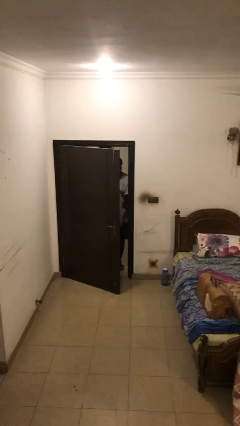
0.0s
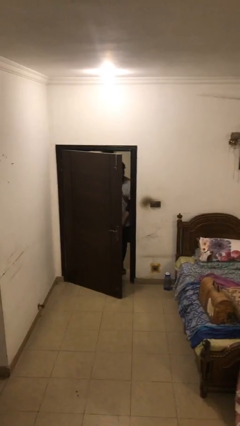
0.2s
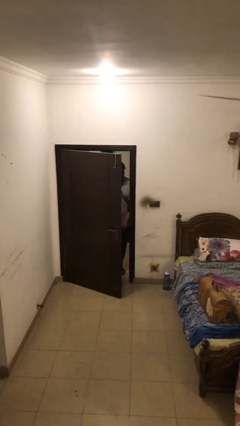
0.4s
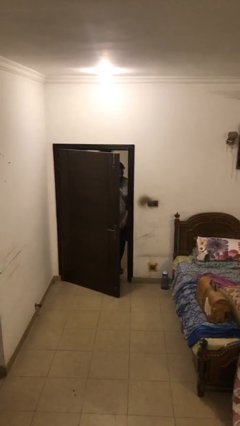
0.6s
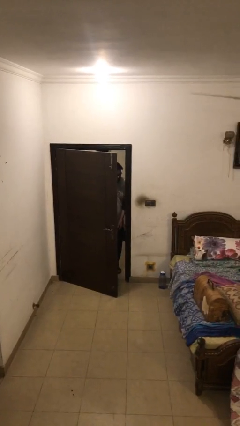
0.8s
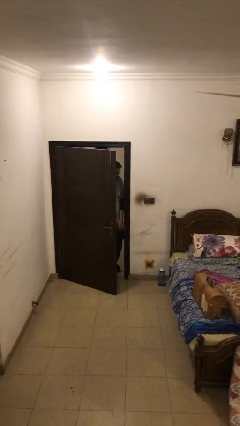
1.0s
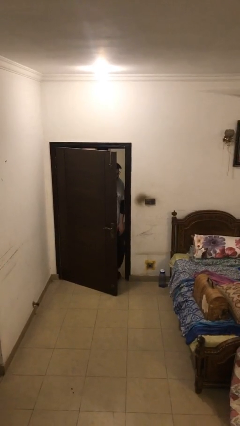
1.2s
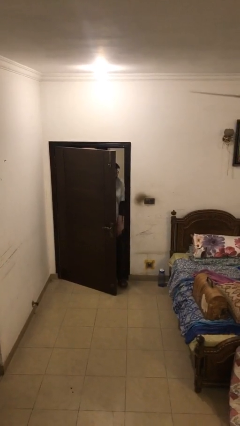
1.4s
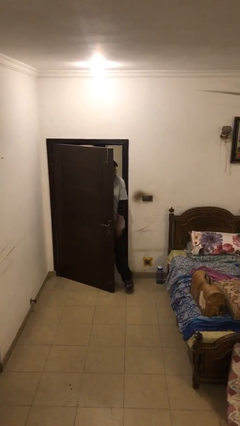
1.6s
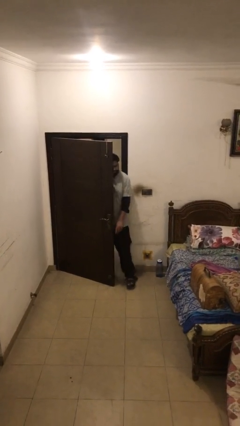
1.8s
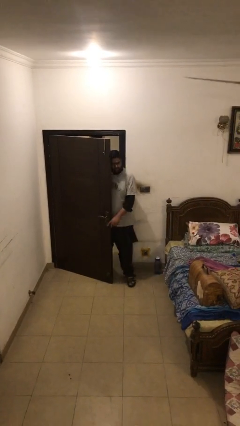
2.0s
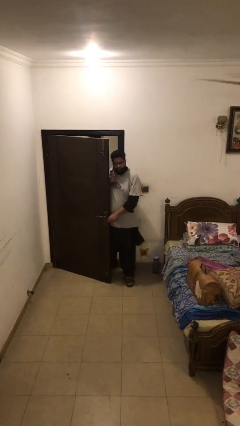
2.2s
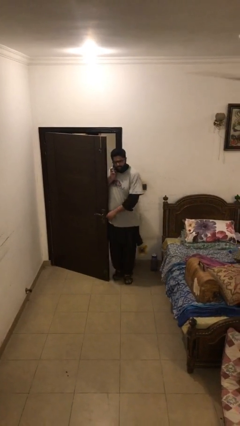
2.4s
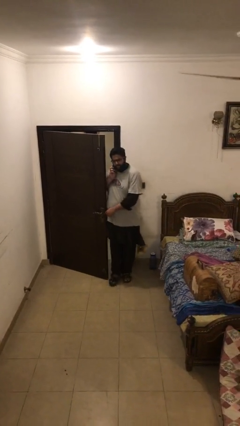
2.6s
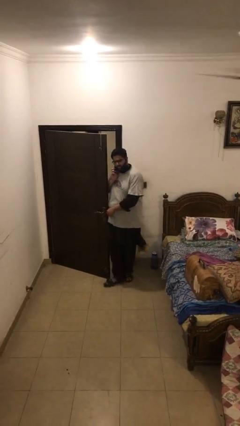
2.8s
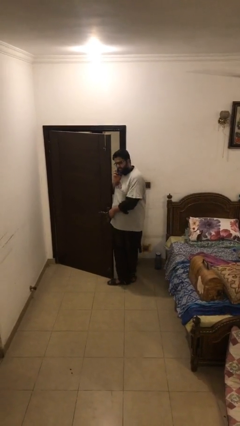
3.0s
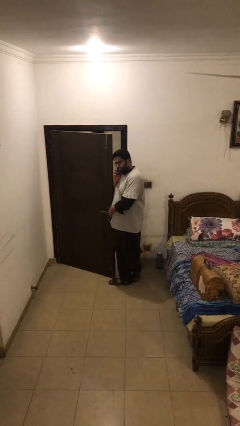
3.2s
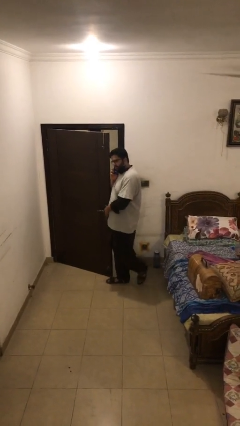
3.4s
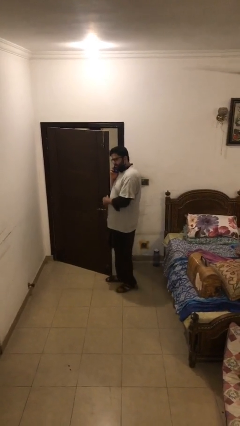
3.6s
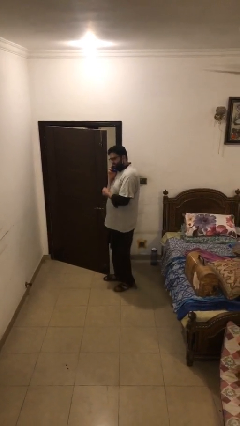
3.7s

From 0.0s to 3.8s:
person enters scene through structure

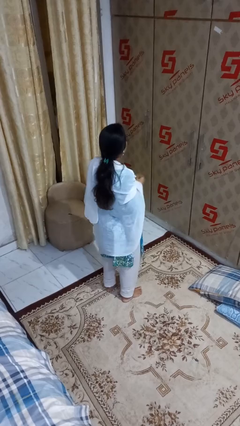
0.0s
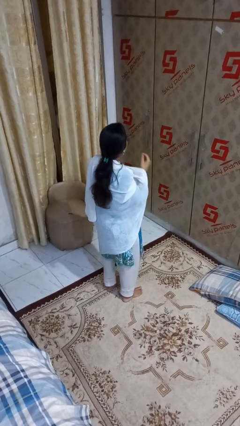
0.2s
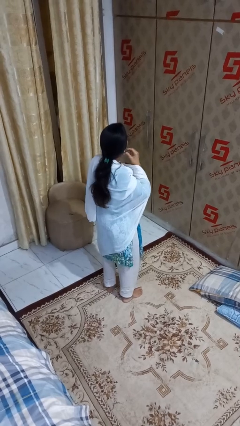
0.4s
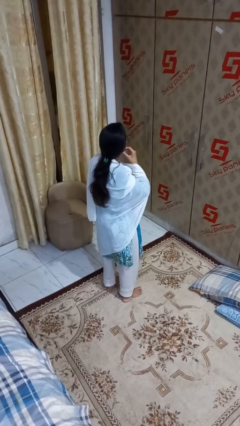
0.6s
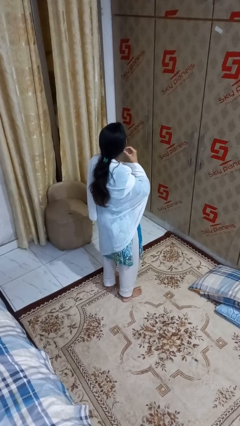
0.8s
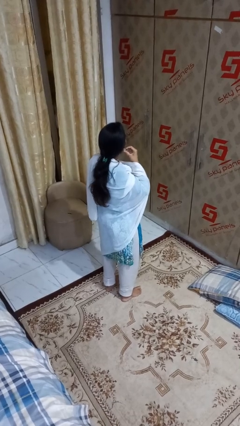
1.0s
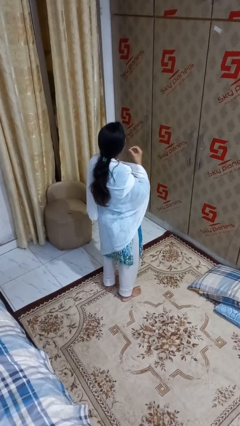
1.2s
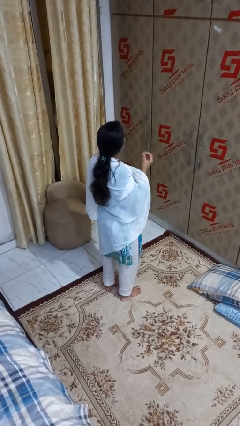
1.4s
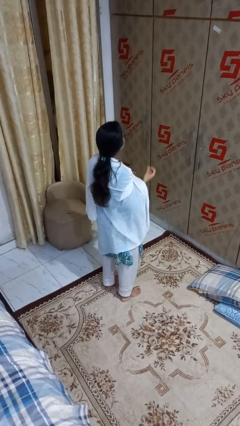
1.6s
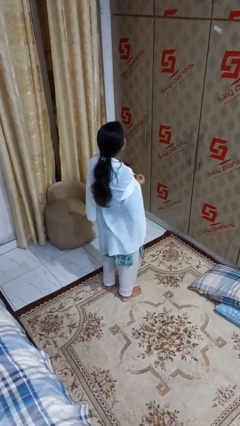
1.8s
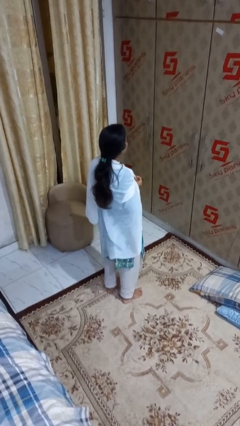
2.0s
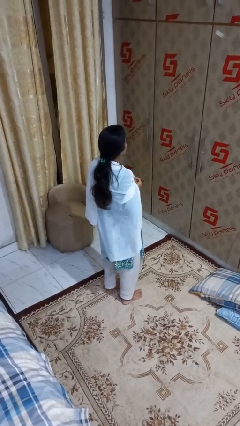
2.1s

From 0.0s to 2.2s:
person takes off earrings

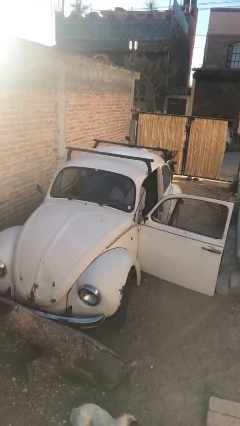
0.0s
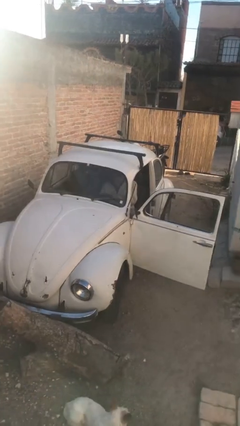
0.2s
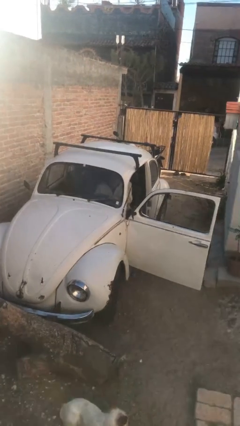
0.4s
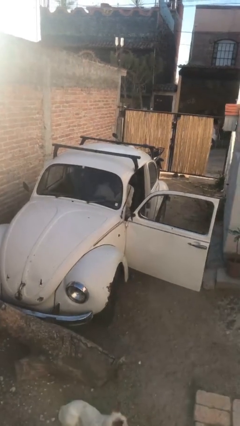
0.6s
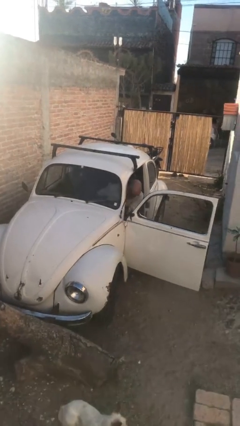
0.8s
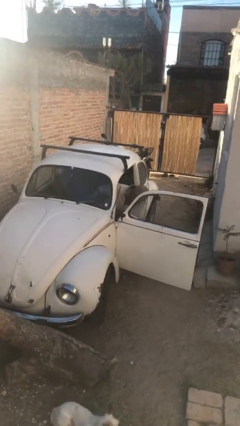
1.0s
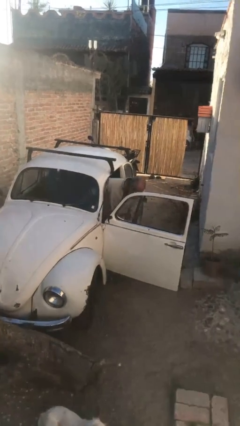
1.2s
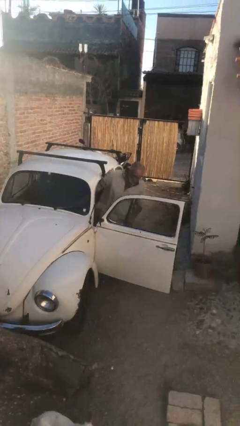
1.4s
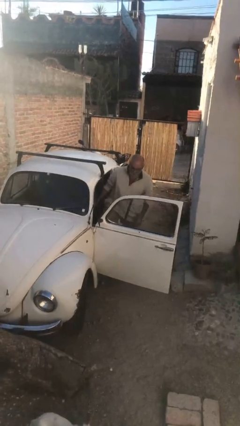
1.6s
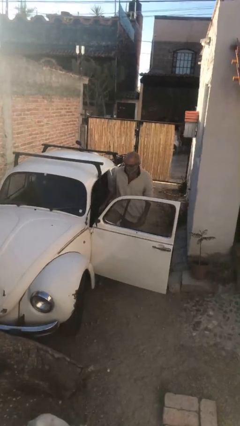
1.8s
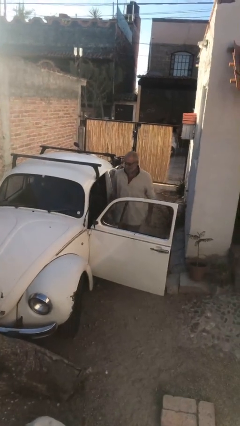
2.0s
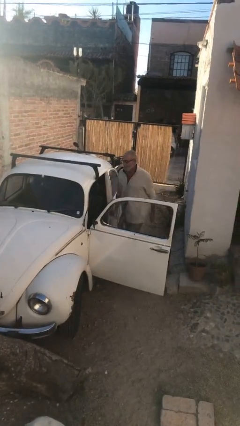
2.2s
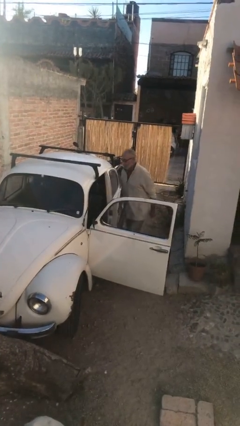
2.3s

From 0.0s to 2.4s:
person exits car

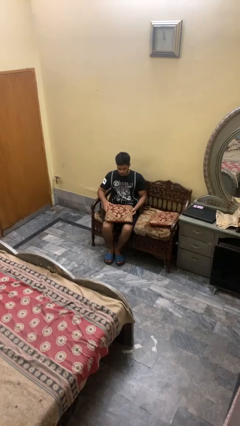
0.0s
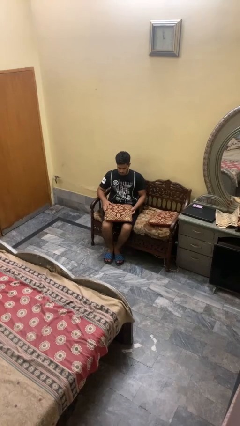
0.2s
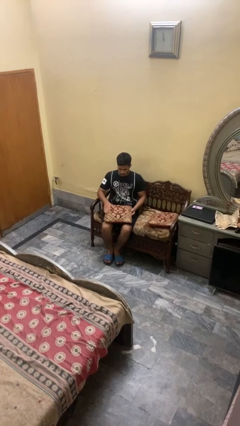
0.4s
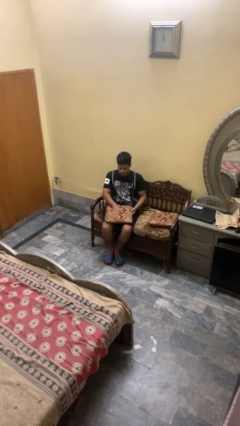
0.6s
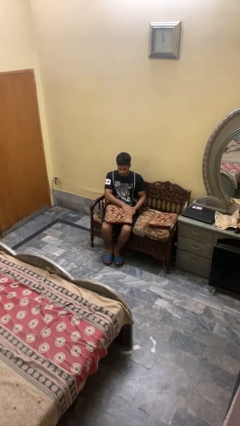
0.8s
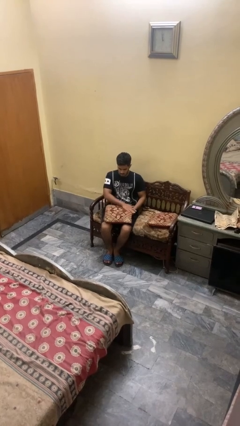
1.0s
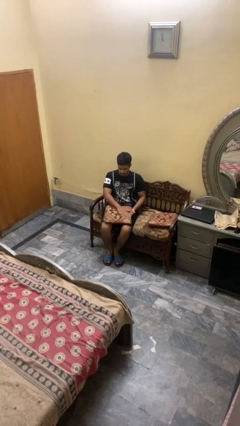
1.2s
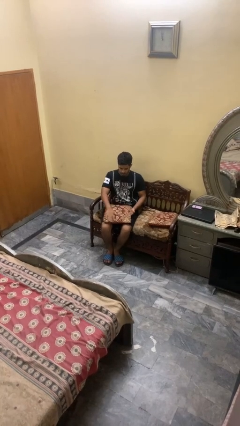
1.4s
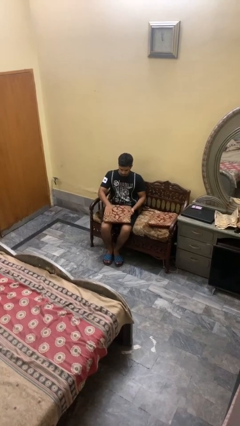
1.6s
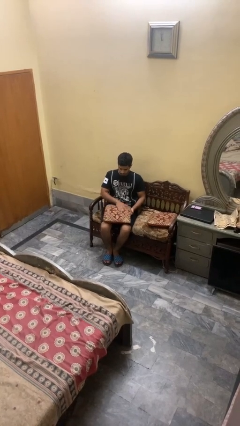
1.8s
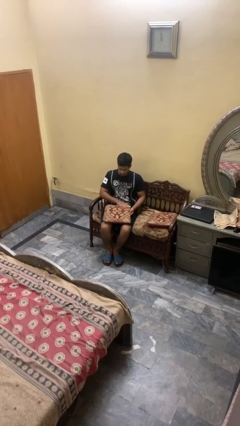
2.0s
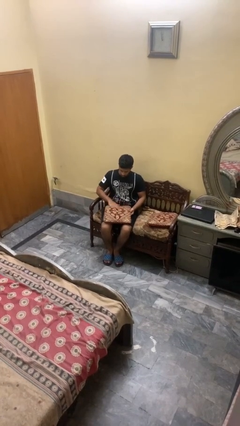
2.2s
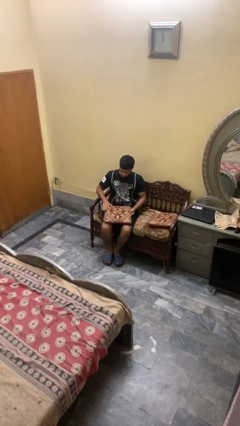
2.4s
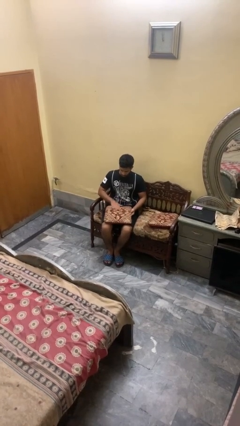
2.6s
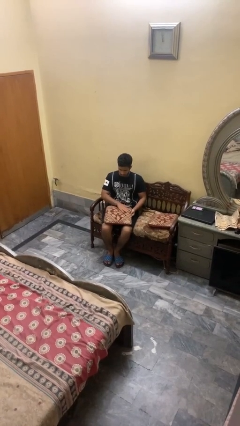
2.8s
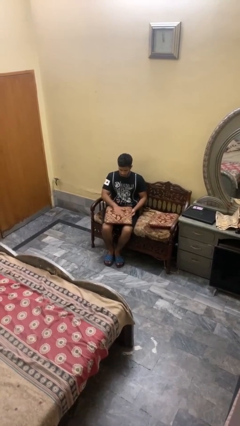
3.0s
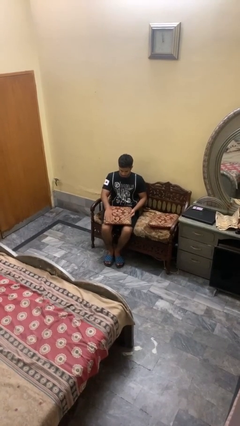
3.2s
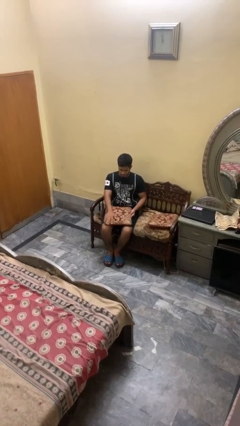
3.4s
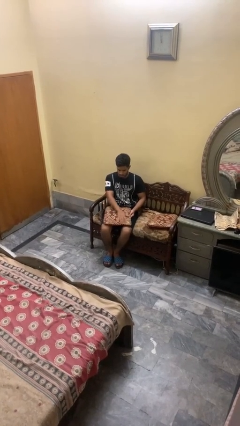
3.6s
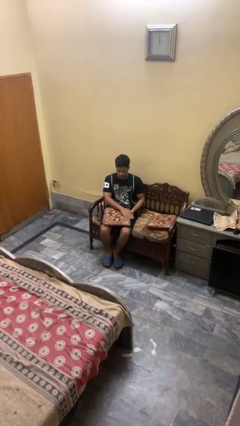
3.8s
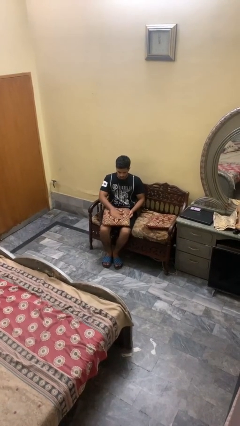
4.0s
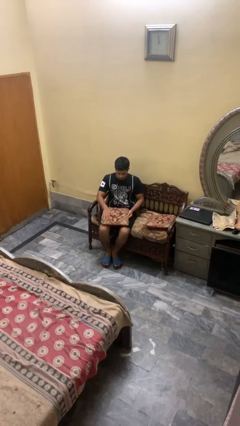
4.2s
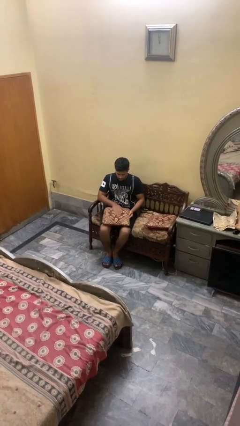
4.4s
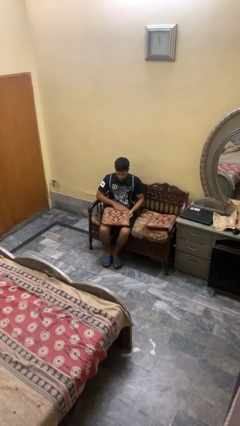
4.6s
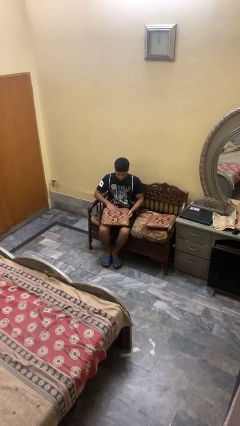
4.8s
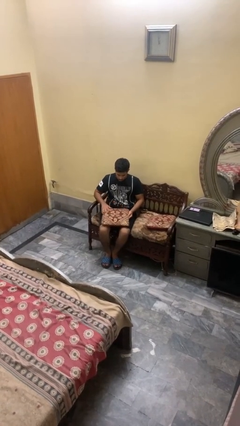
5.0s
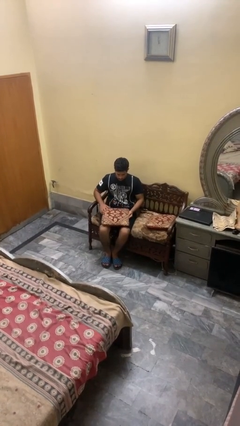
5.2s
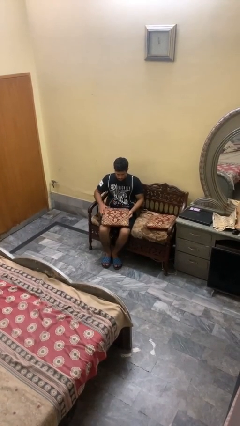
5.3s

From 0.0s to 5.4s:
person waves hand over object

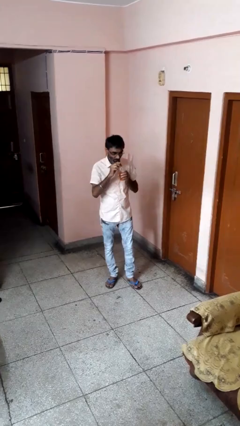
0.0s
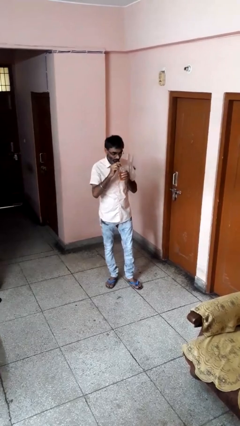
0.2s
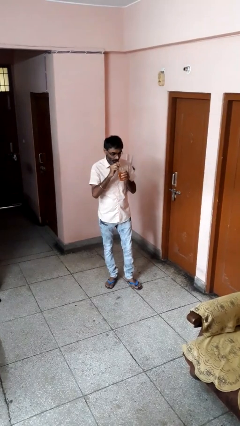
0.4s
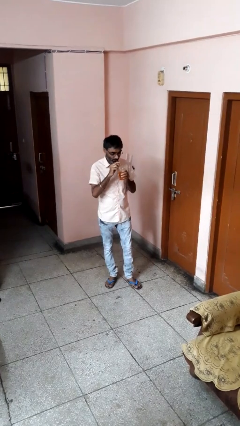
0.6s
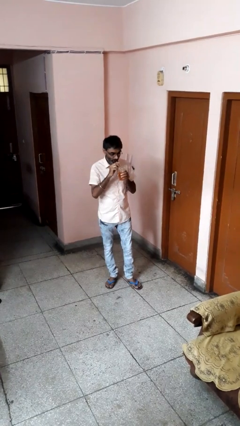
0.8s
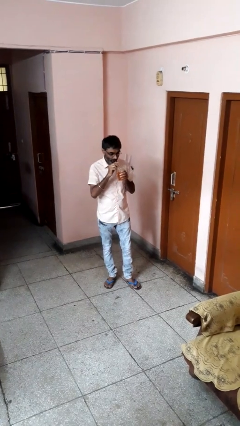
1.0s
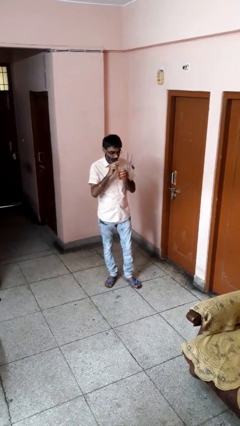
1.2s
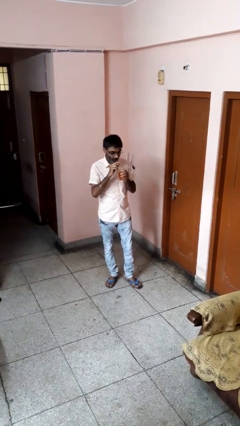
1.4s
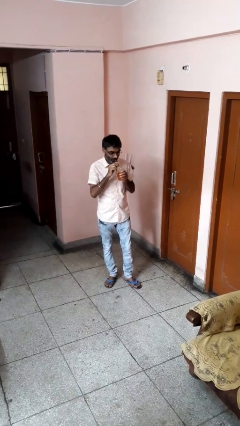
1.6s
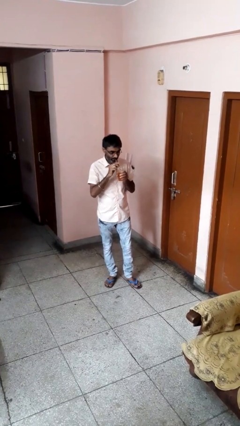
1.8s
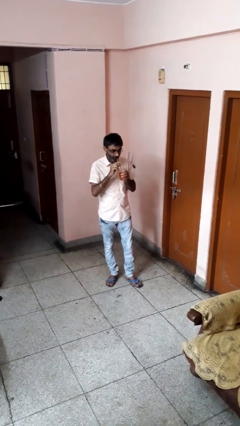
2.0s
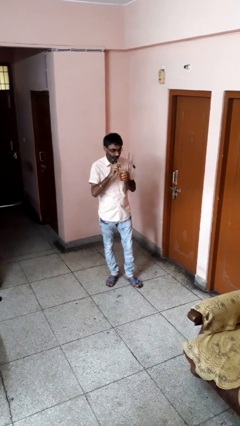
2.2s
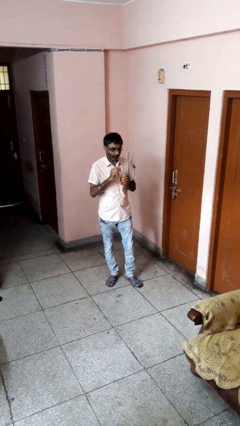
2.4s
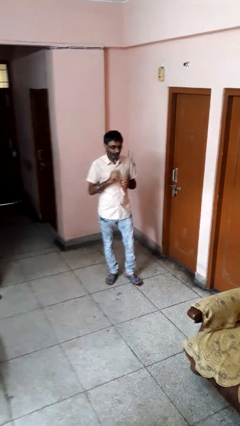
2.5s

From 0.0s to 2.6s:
person drinks from straw

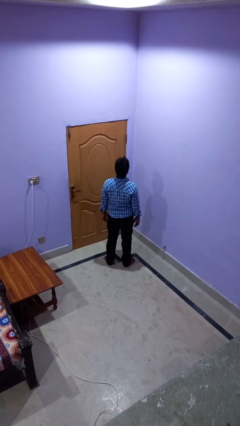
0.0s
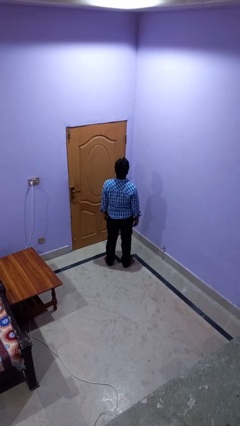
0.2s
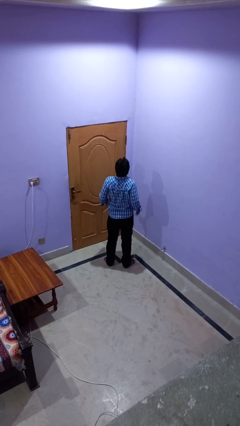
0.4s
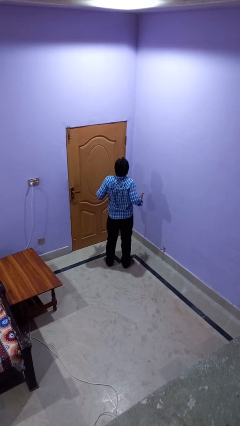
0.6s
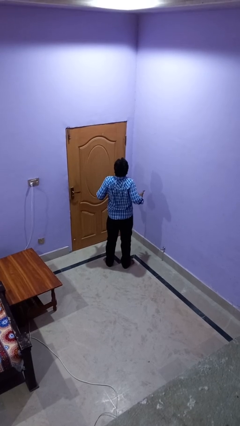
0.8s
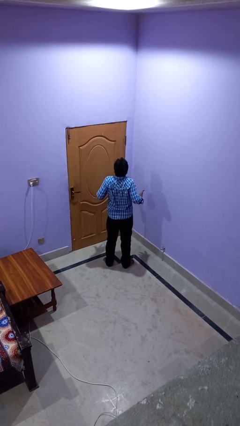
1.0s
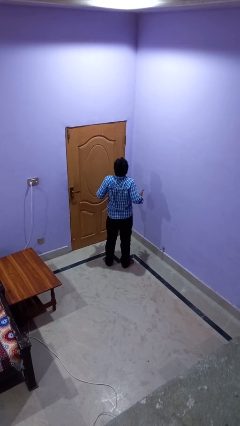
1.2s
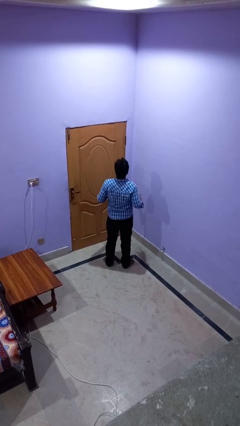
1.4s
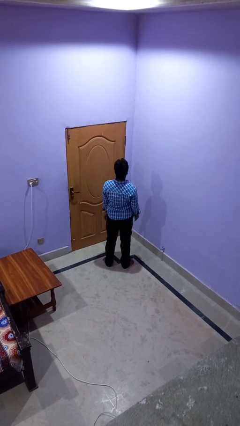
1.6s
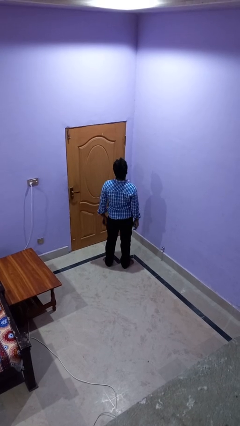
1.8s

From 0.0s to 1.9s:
person shrugs
